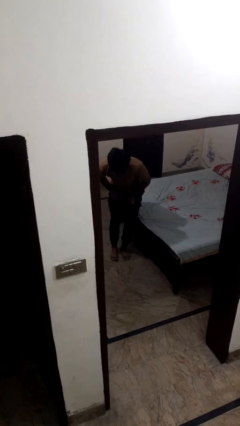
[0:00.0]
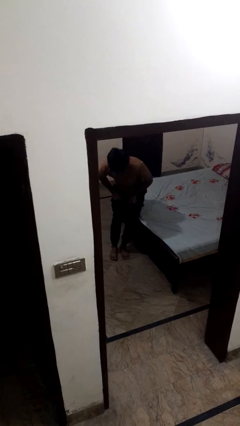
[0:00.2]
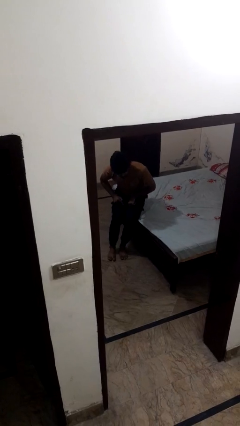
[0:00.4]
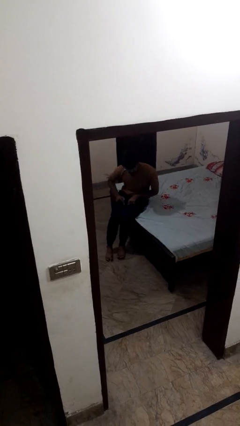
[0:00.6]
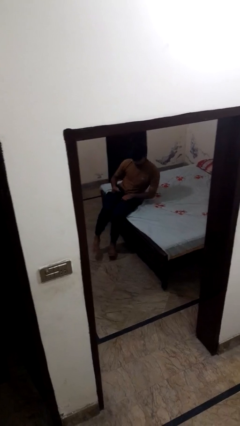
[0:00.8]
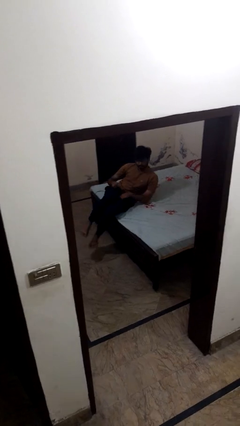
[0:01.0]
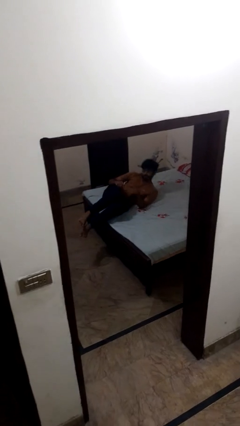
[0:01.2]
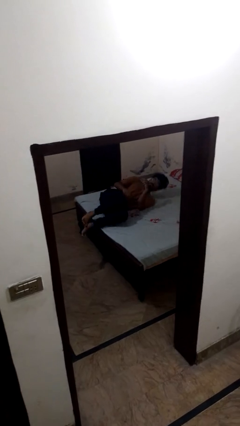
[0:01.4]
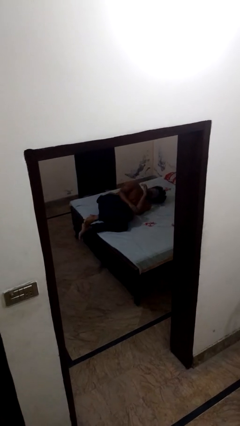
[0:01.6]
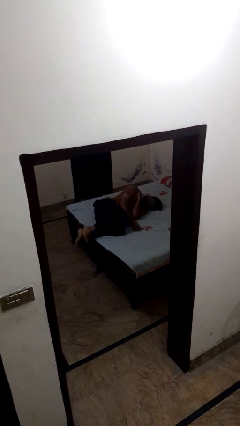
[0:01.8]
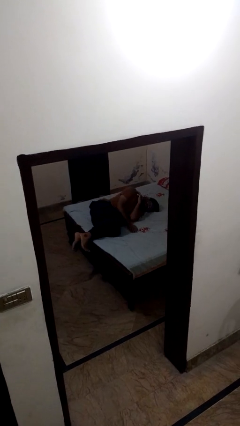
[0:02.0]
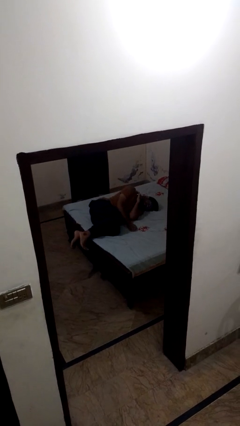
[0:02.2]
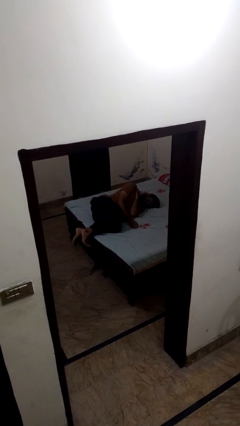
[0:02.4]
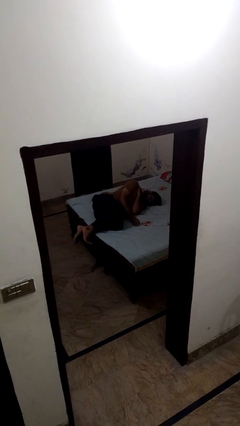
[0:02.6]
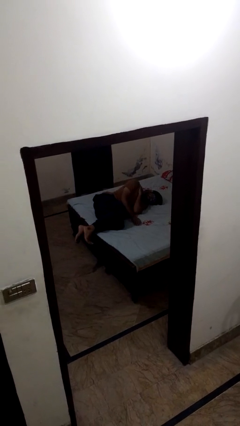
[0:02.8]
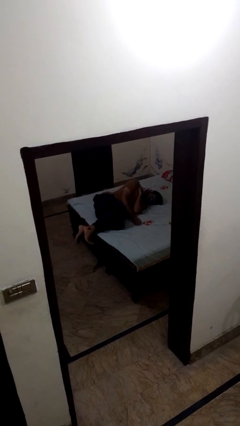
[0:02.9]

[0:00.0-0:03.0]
person lies down on bed

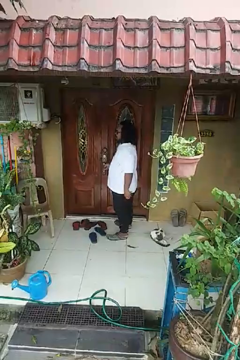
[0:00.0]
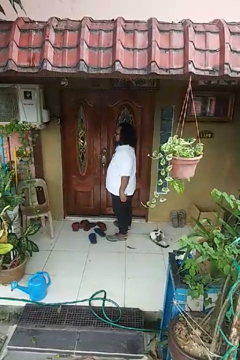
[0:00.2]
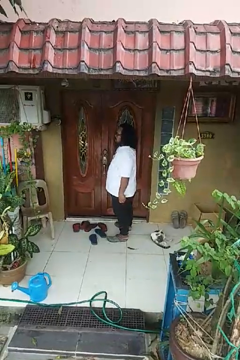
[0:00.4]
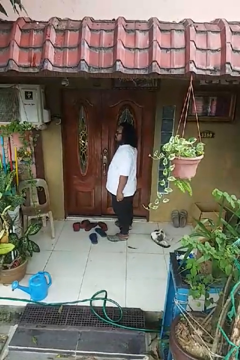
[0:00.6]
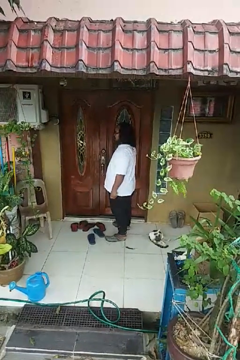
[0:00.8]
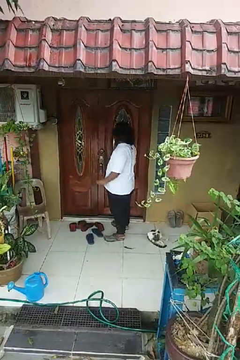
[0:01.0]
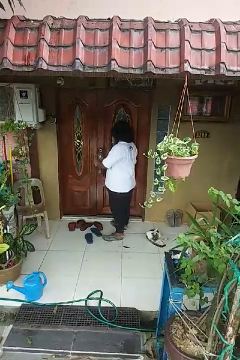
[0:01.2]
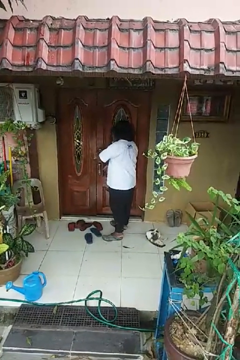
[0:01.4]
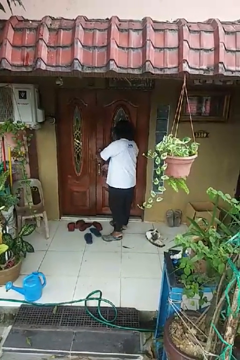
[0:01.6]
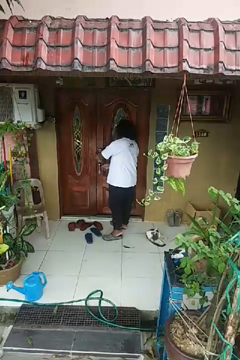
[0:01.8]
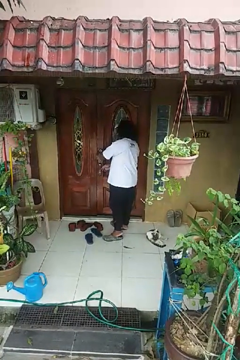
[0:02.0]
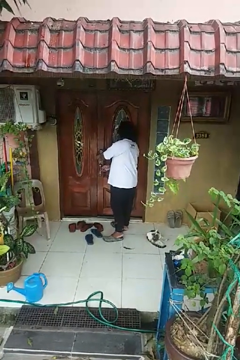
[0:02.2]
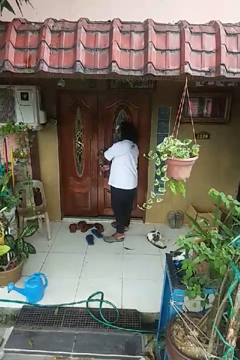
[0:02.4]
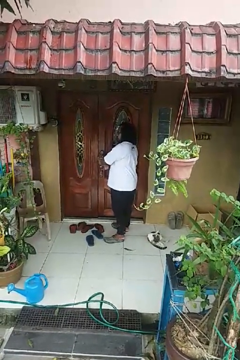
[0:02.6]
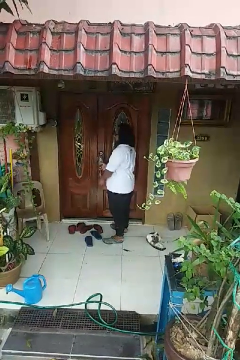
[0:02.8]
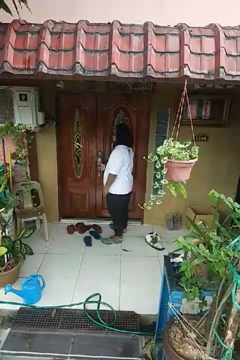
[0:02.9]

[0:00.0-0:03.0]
person unlocks door with keys

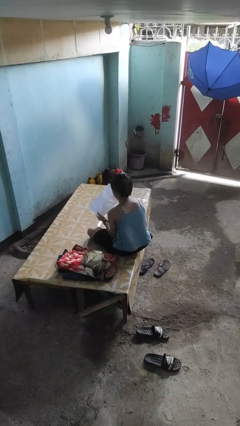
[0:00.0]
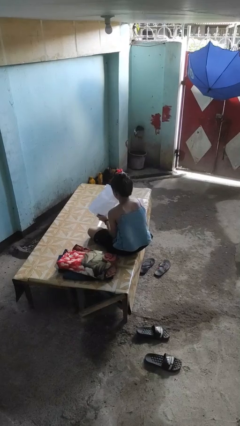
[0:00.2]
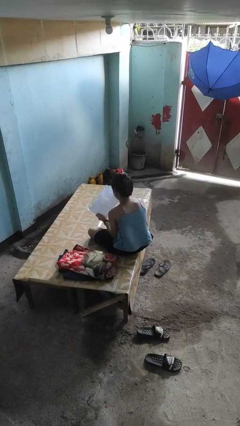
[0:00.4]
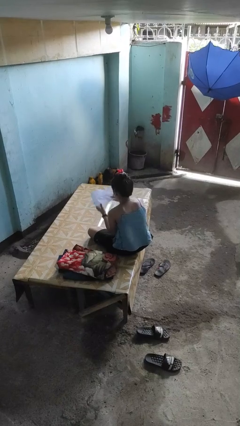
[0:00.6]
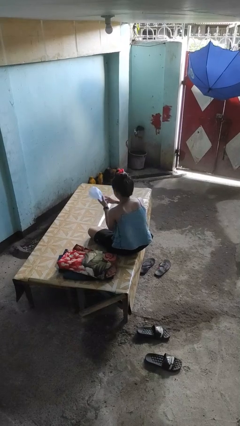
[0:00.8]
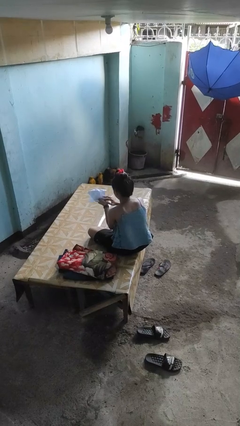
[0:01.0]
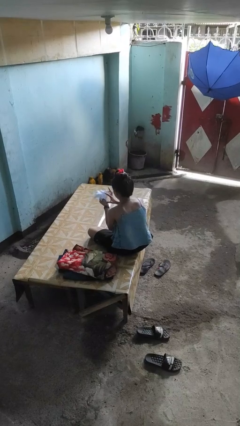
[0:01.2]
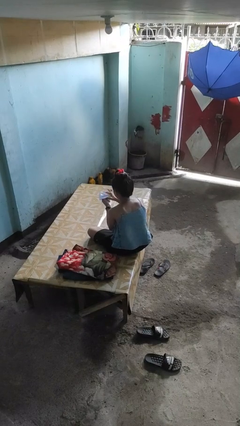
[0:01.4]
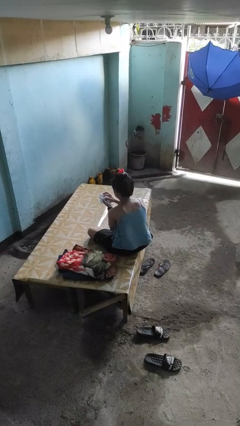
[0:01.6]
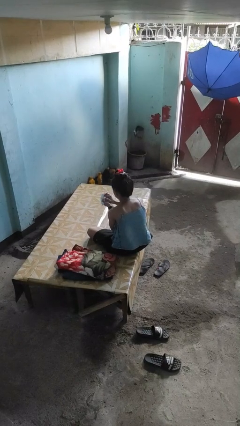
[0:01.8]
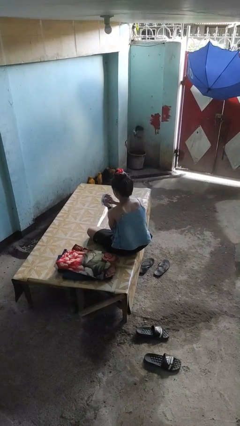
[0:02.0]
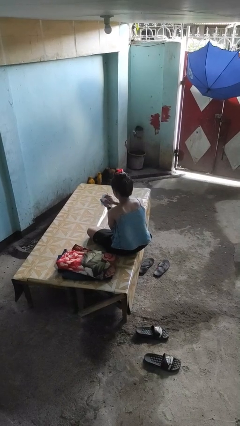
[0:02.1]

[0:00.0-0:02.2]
person crumples paper

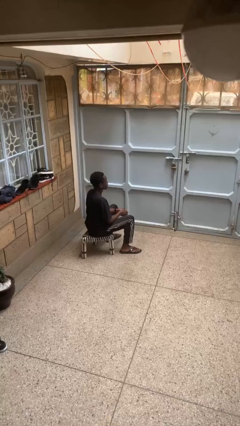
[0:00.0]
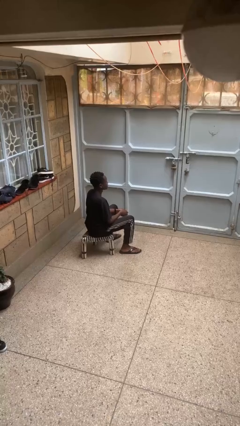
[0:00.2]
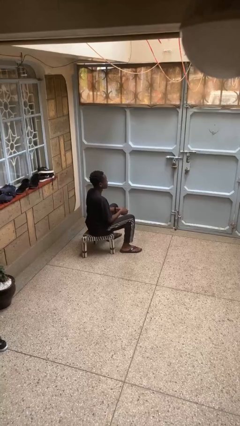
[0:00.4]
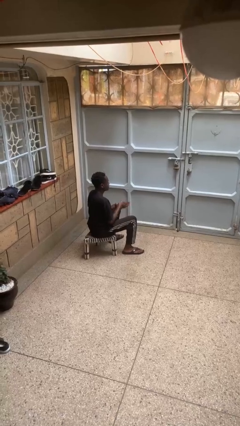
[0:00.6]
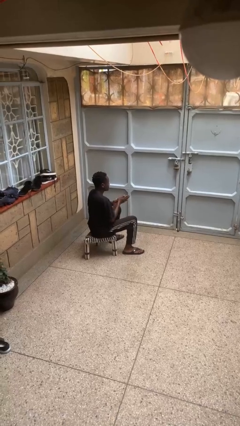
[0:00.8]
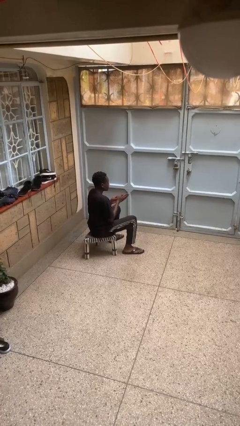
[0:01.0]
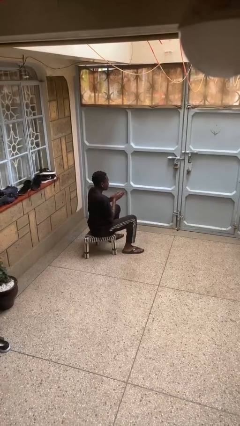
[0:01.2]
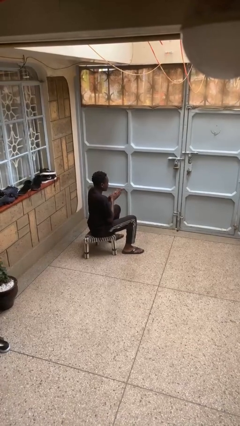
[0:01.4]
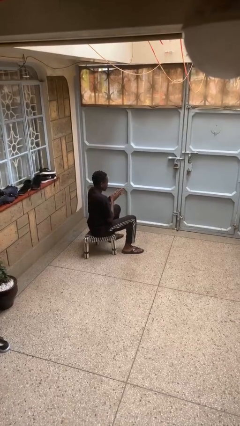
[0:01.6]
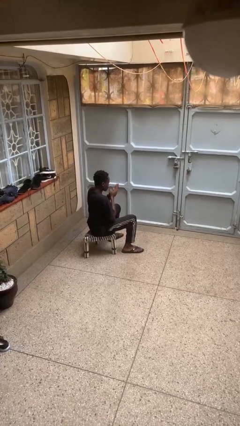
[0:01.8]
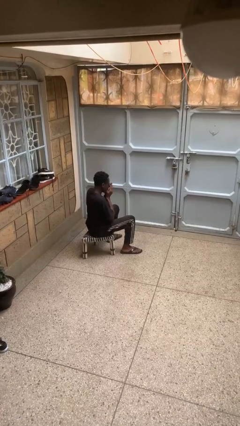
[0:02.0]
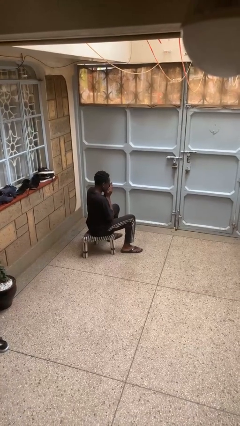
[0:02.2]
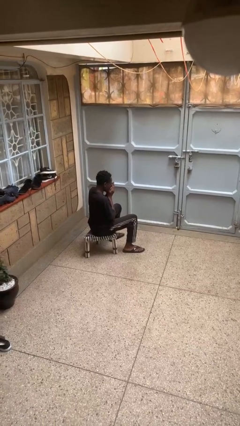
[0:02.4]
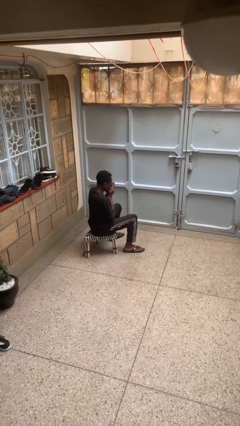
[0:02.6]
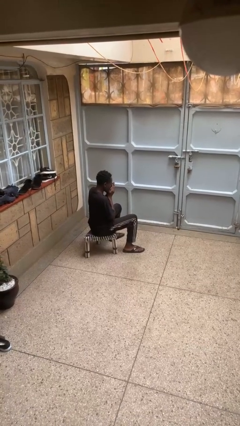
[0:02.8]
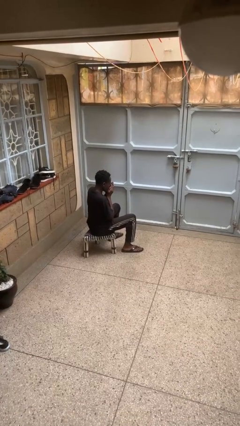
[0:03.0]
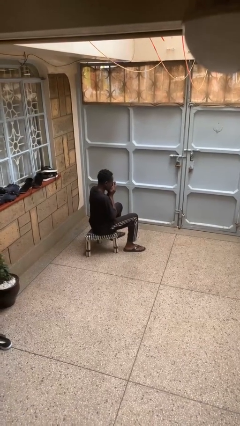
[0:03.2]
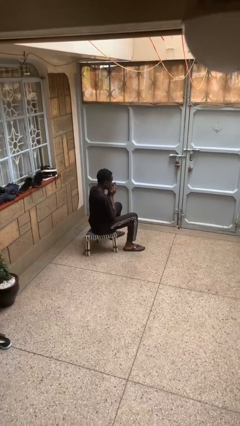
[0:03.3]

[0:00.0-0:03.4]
person blows into hands

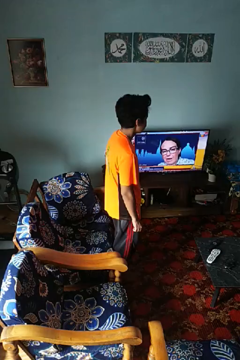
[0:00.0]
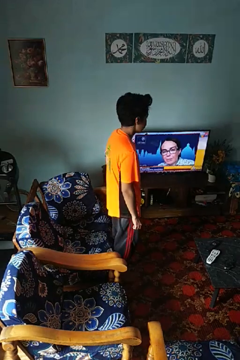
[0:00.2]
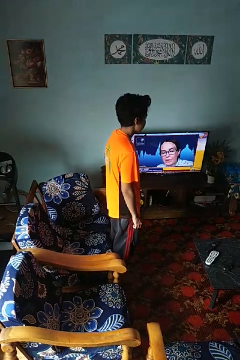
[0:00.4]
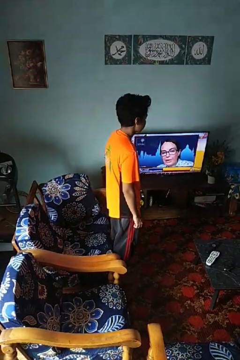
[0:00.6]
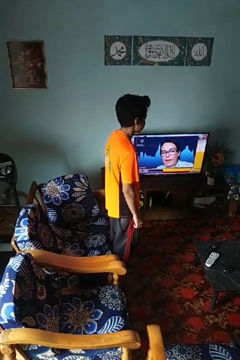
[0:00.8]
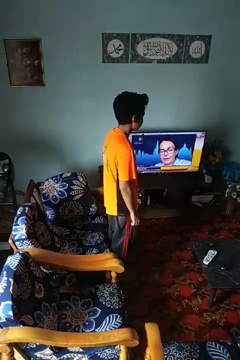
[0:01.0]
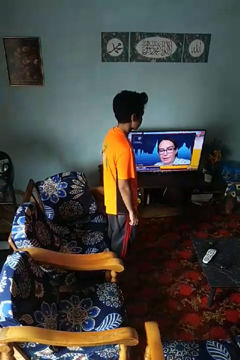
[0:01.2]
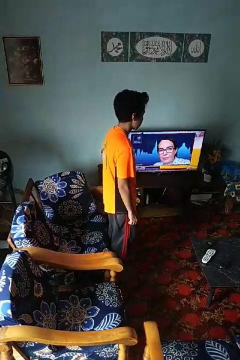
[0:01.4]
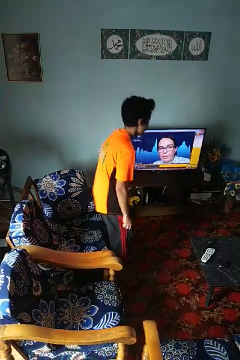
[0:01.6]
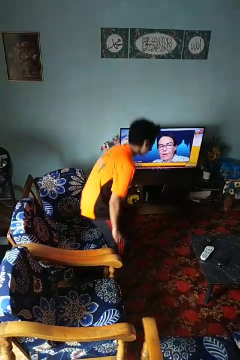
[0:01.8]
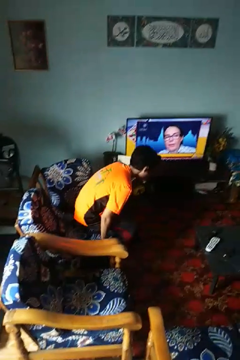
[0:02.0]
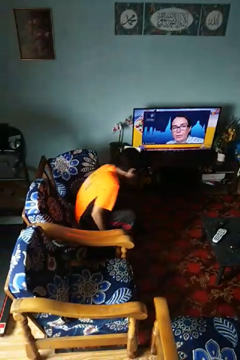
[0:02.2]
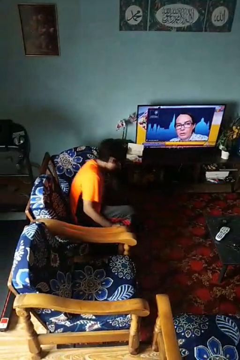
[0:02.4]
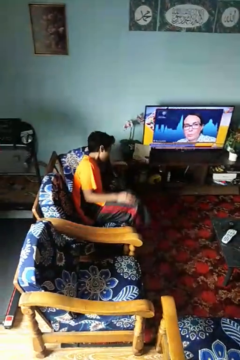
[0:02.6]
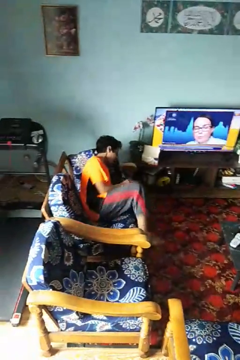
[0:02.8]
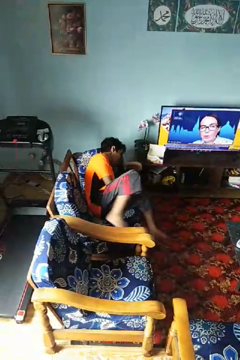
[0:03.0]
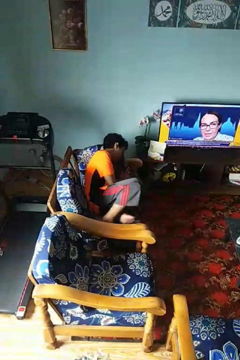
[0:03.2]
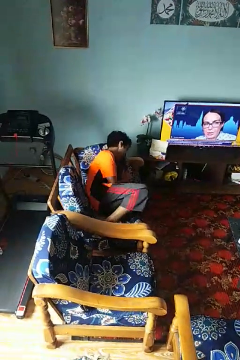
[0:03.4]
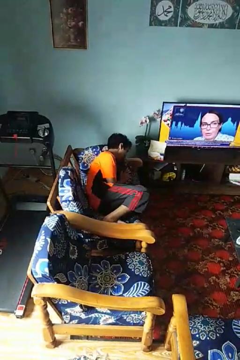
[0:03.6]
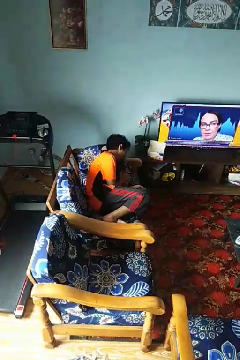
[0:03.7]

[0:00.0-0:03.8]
person lies down on couch

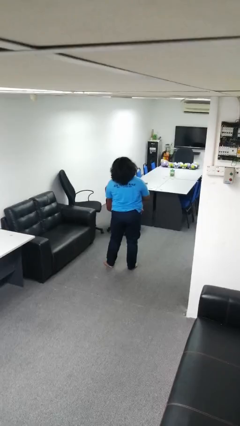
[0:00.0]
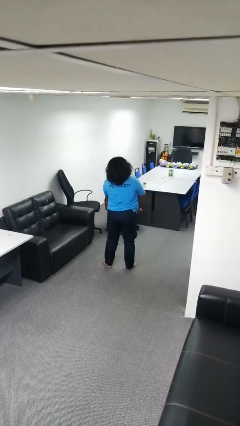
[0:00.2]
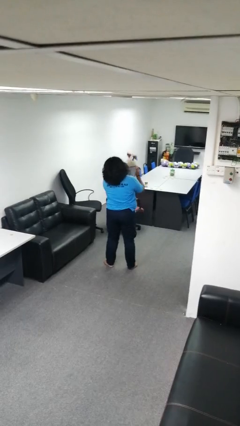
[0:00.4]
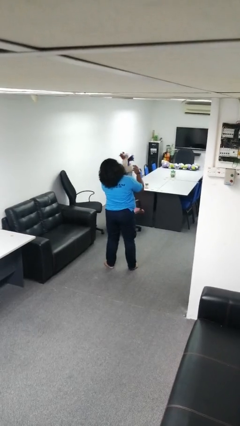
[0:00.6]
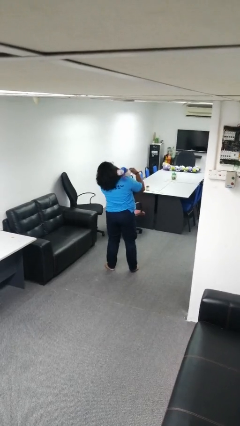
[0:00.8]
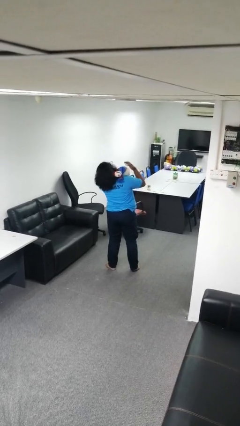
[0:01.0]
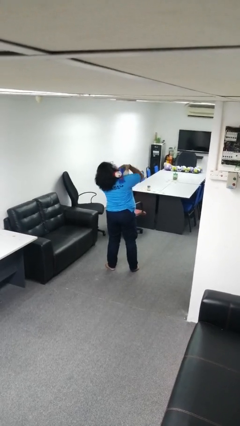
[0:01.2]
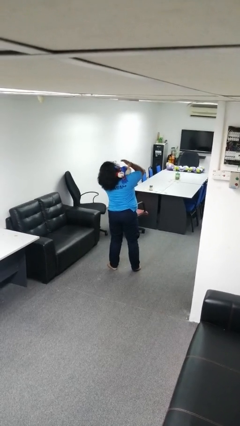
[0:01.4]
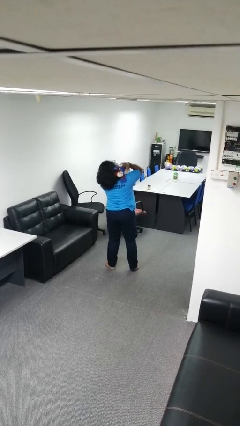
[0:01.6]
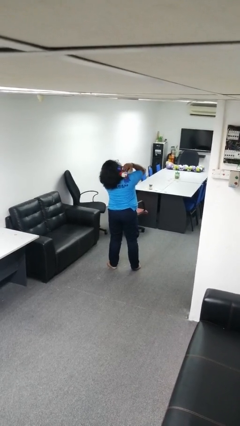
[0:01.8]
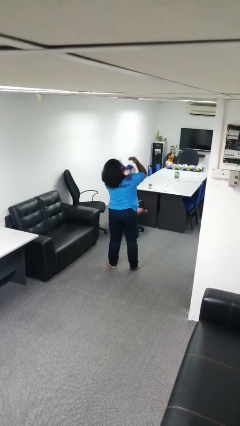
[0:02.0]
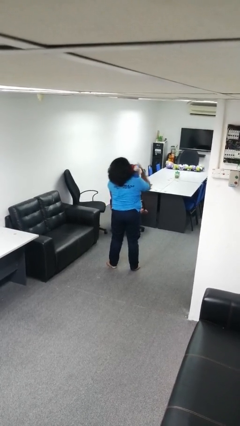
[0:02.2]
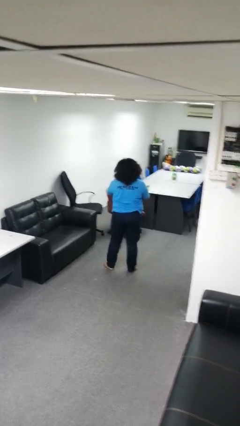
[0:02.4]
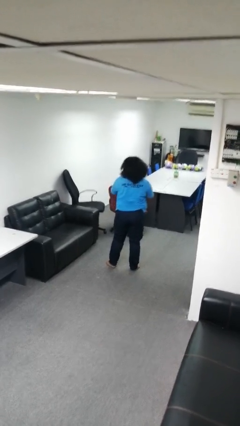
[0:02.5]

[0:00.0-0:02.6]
person hugs stuffed animal

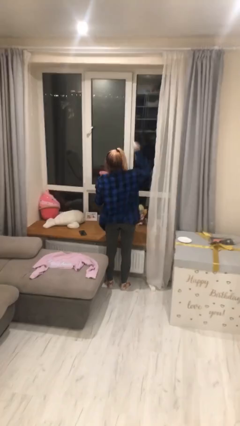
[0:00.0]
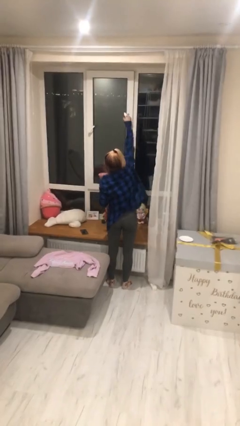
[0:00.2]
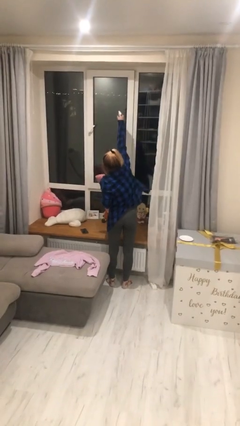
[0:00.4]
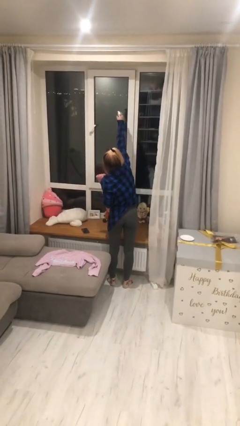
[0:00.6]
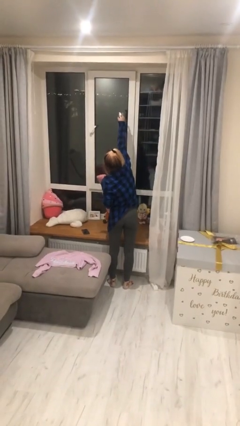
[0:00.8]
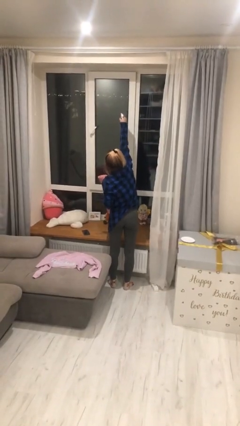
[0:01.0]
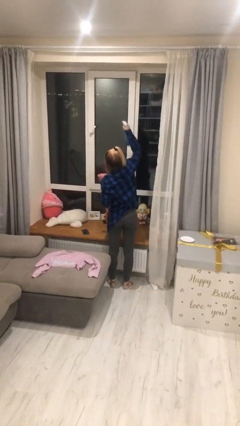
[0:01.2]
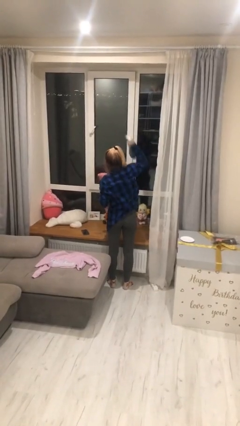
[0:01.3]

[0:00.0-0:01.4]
person sprays from bottle
